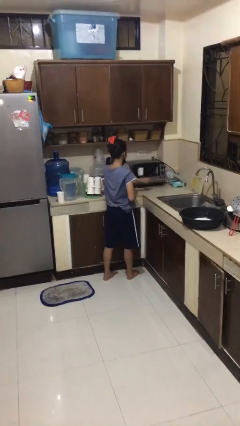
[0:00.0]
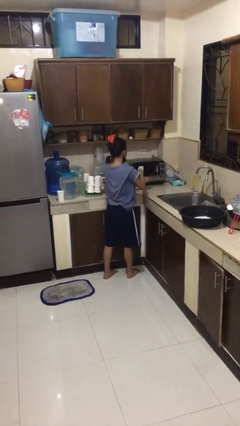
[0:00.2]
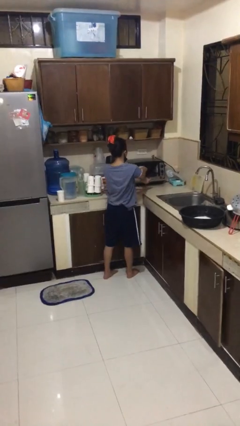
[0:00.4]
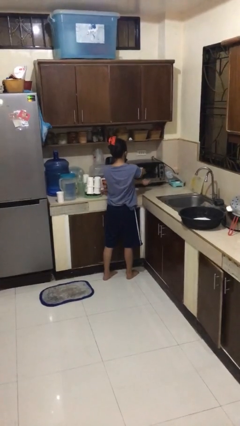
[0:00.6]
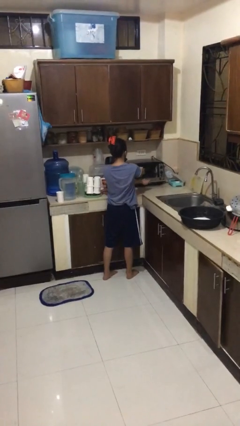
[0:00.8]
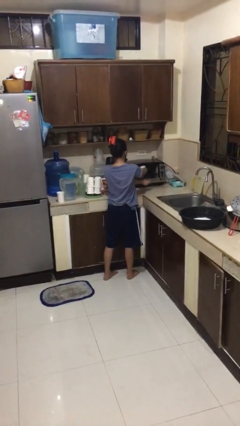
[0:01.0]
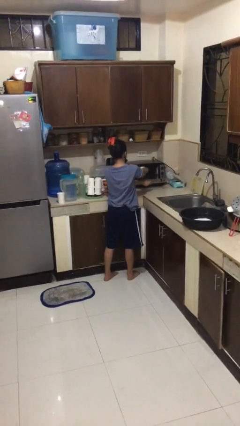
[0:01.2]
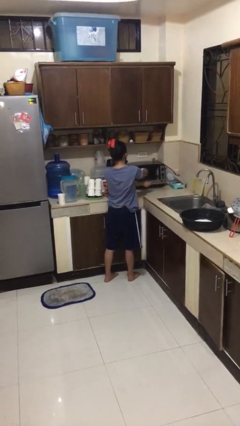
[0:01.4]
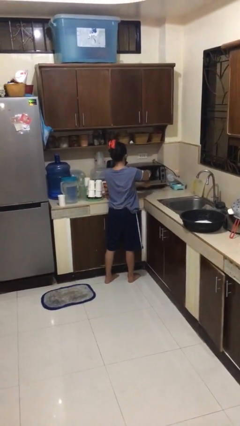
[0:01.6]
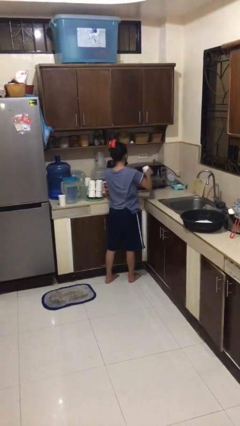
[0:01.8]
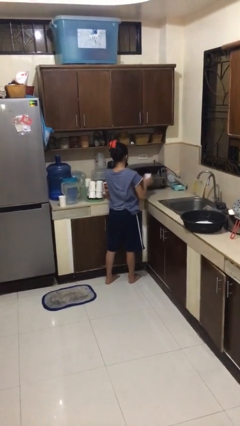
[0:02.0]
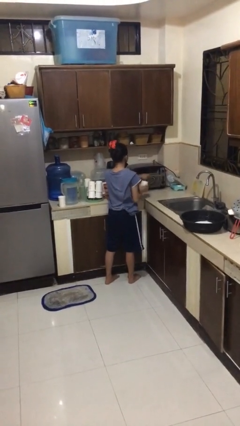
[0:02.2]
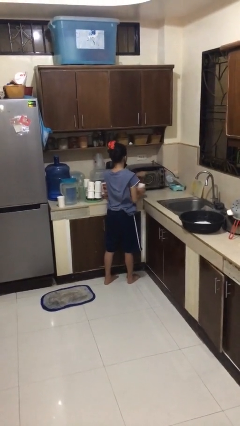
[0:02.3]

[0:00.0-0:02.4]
person takes object from microwave

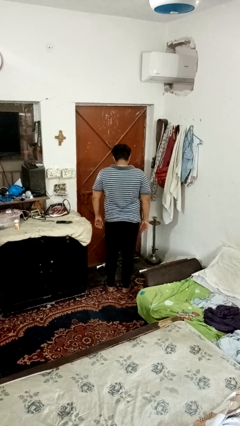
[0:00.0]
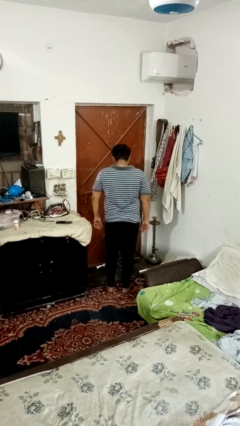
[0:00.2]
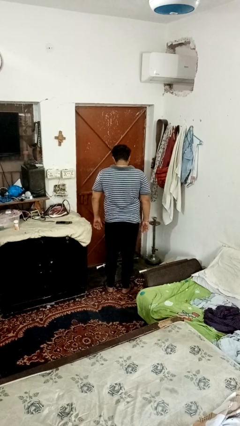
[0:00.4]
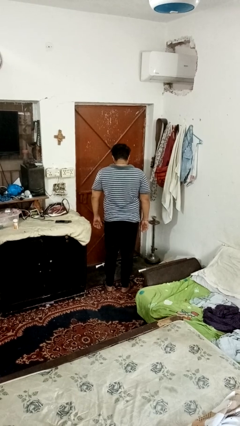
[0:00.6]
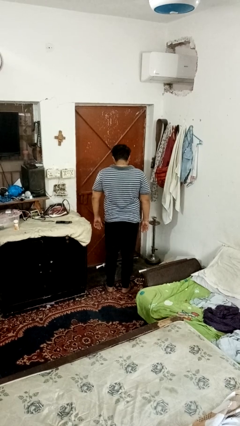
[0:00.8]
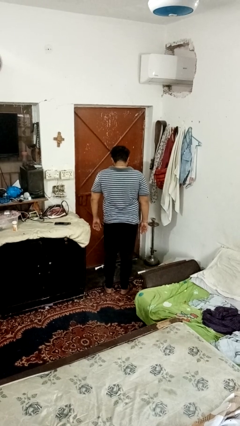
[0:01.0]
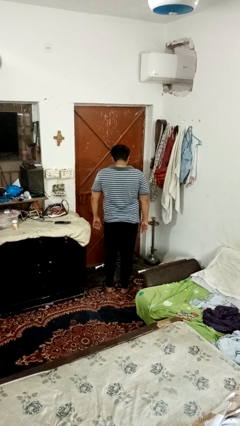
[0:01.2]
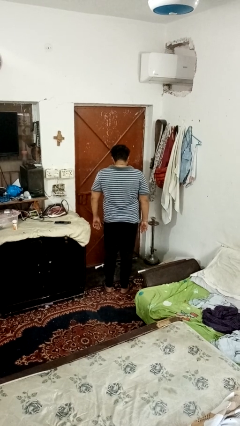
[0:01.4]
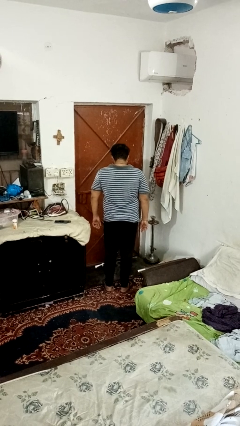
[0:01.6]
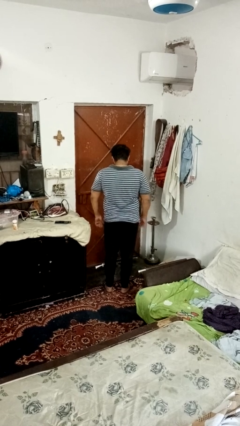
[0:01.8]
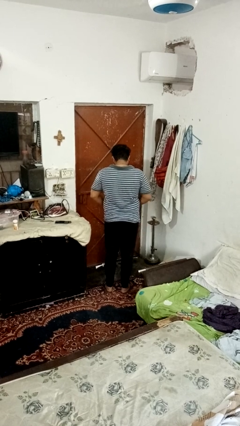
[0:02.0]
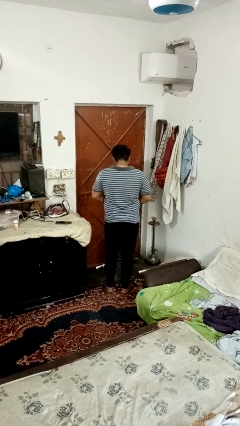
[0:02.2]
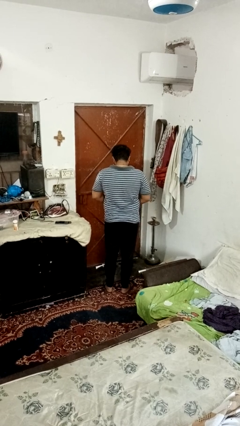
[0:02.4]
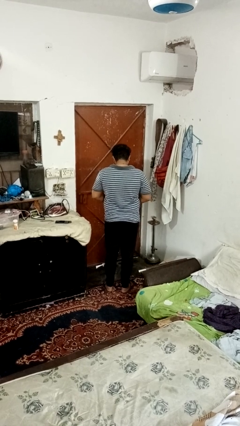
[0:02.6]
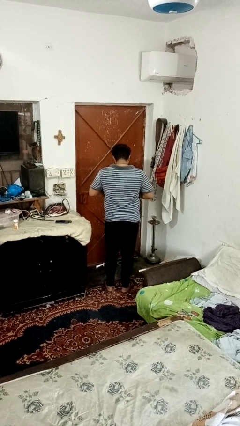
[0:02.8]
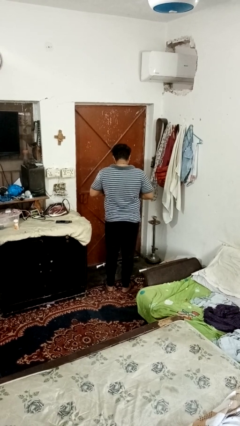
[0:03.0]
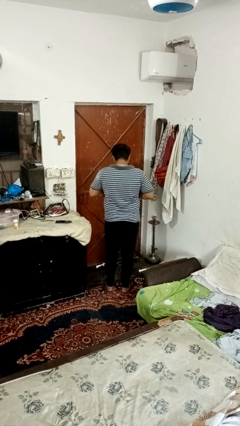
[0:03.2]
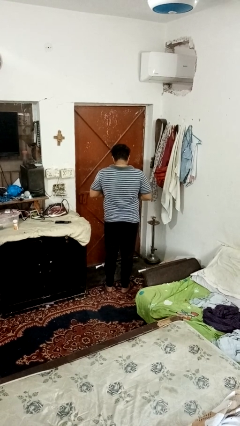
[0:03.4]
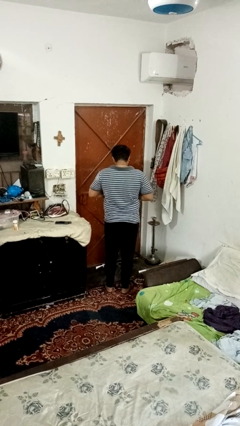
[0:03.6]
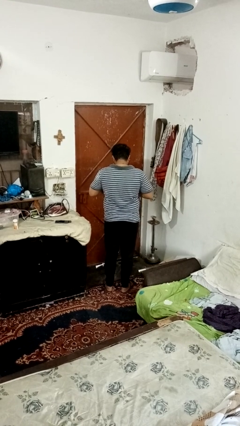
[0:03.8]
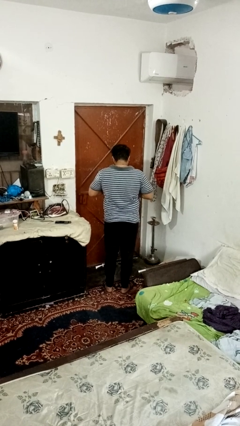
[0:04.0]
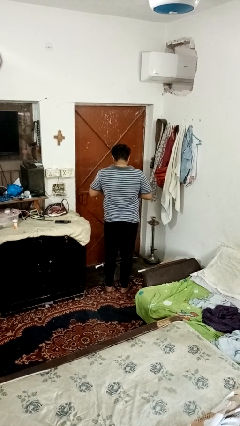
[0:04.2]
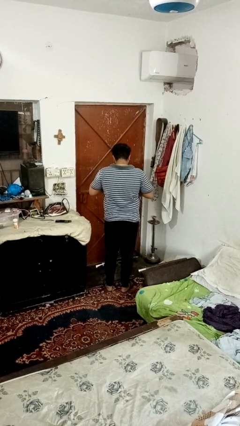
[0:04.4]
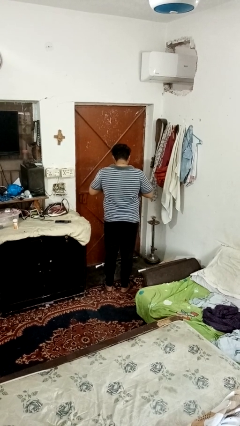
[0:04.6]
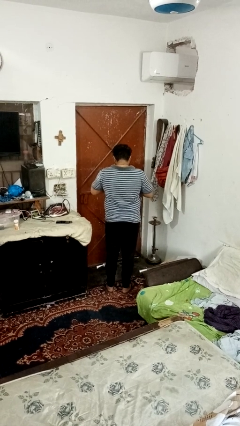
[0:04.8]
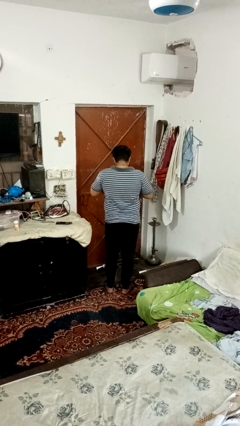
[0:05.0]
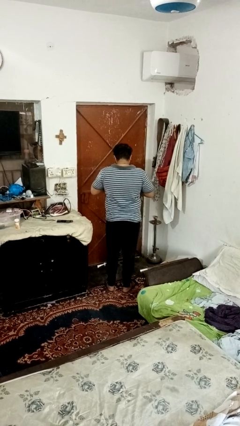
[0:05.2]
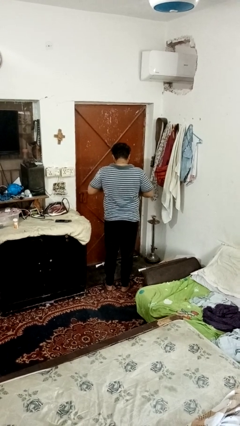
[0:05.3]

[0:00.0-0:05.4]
person buttons shirt

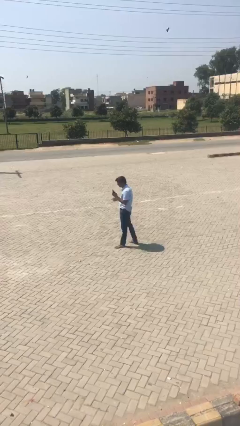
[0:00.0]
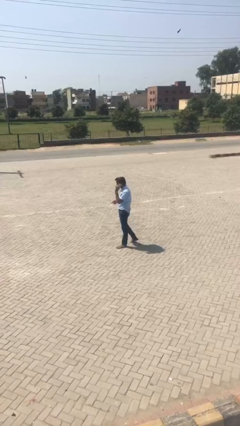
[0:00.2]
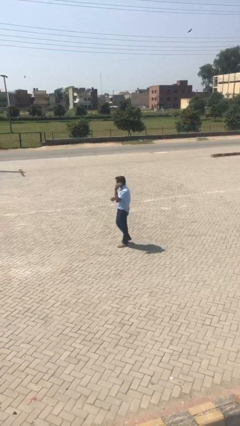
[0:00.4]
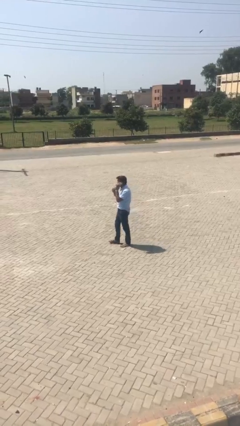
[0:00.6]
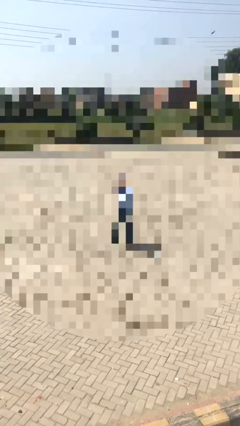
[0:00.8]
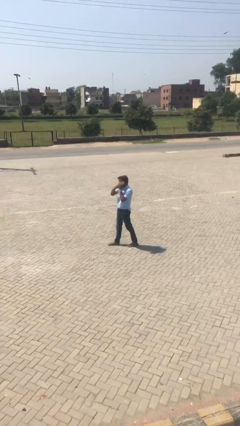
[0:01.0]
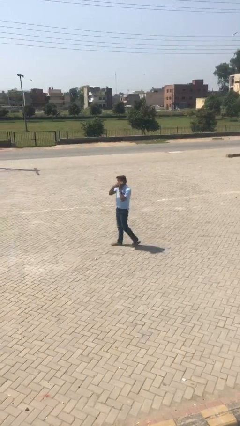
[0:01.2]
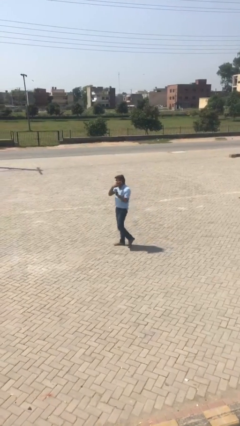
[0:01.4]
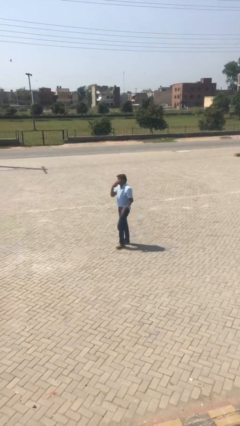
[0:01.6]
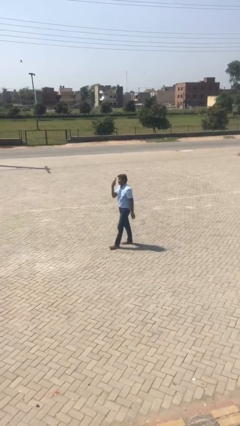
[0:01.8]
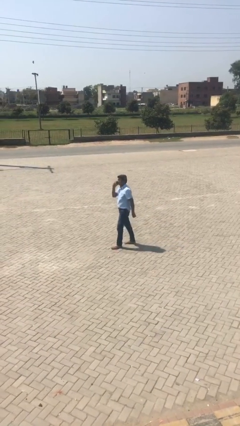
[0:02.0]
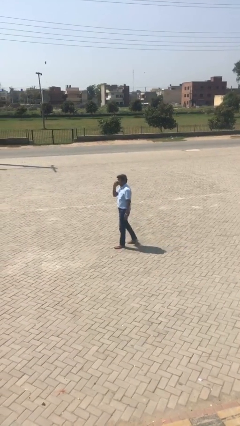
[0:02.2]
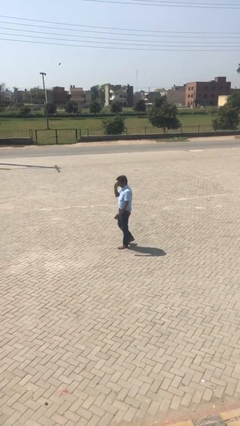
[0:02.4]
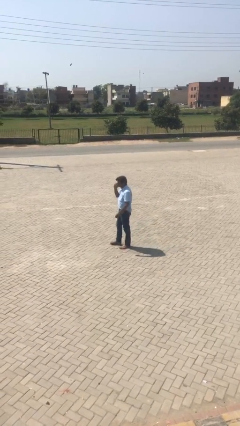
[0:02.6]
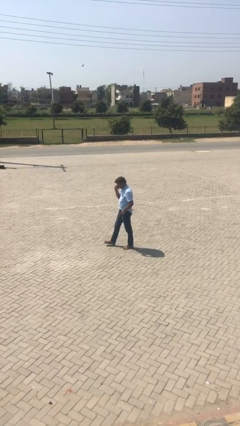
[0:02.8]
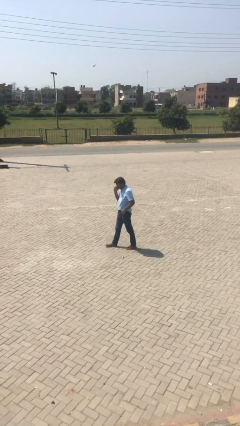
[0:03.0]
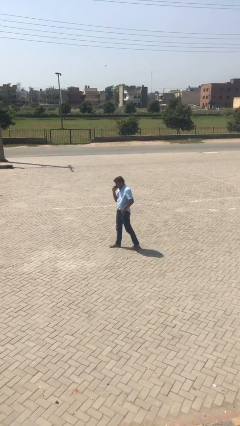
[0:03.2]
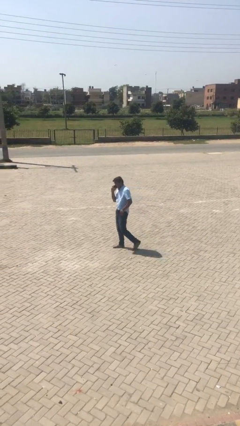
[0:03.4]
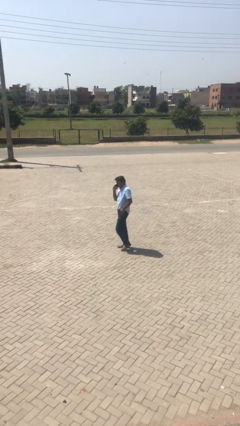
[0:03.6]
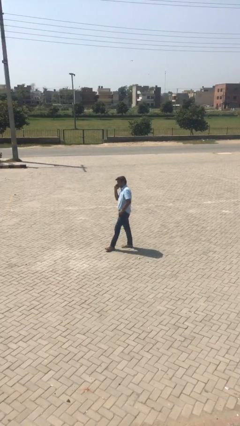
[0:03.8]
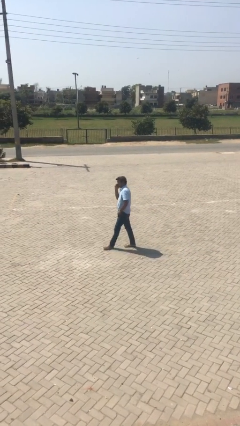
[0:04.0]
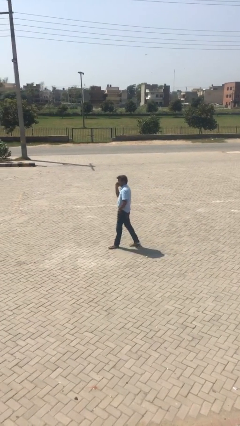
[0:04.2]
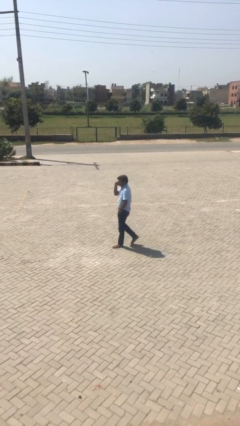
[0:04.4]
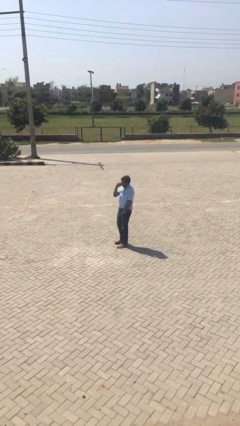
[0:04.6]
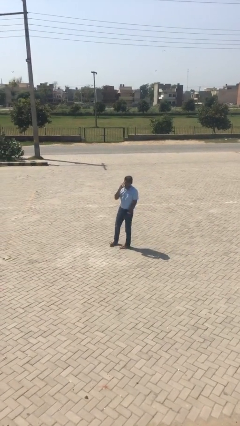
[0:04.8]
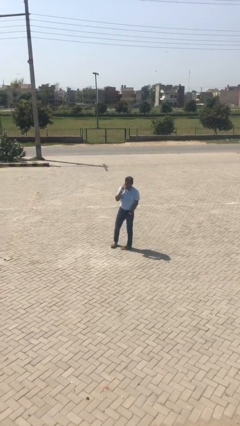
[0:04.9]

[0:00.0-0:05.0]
person talks on phone

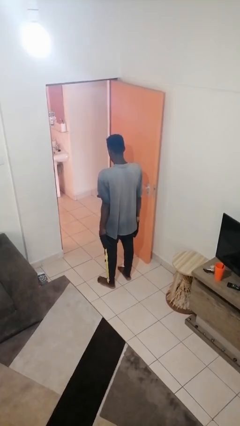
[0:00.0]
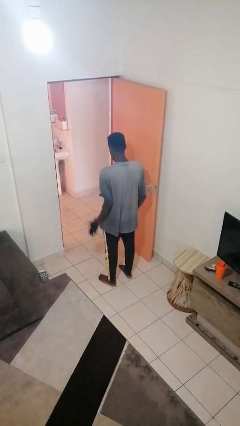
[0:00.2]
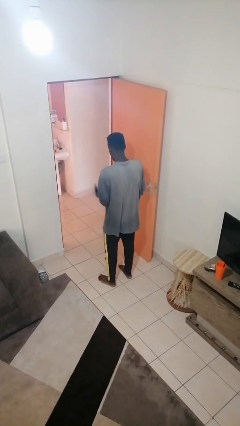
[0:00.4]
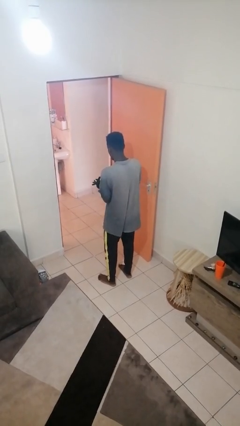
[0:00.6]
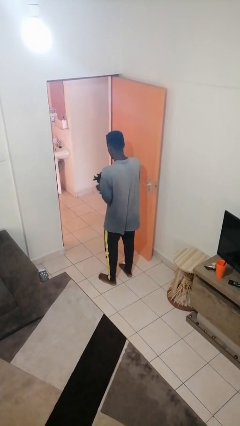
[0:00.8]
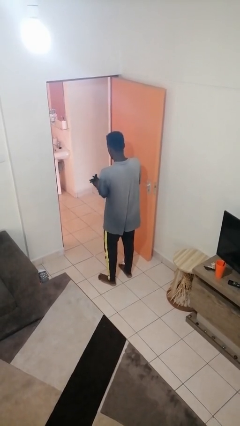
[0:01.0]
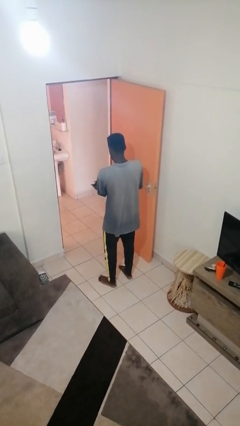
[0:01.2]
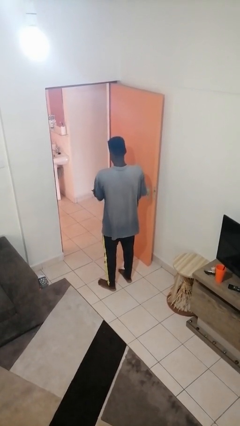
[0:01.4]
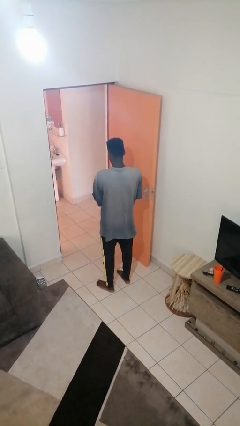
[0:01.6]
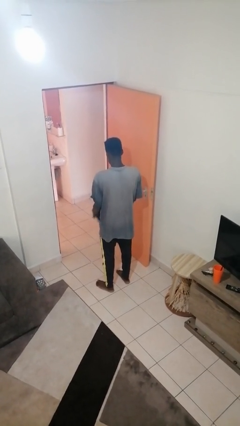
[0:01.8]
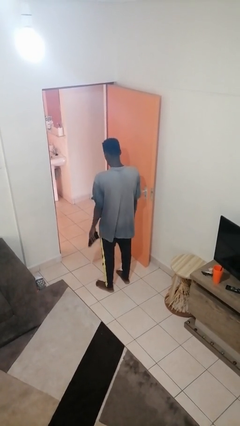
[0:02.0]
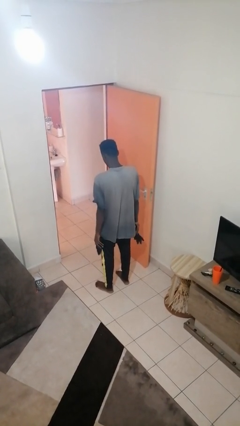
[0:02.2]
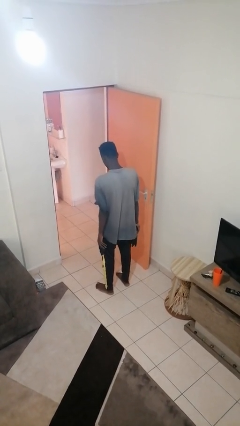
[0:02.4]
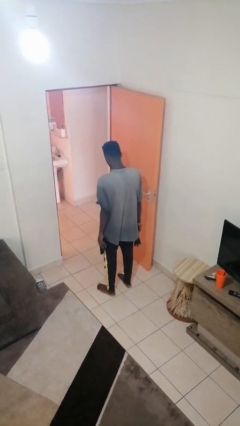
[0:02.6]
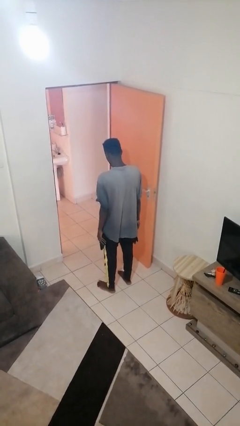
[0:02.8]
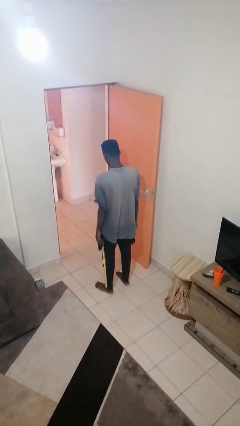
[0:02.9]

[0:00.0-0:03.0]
person takes off gloves

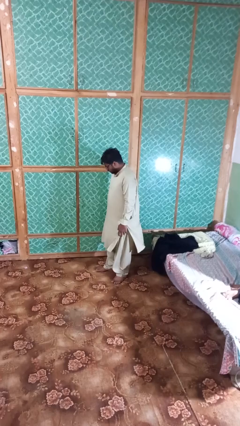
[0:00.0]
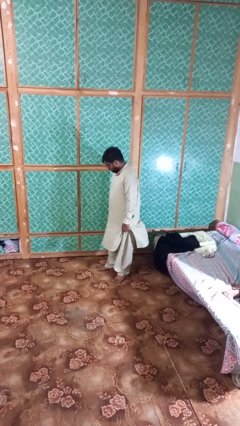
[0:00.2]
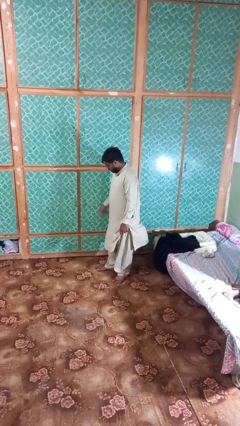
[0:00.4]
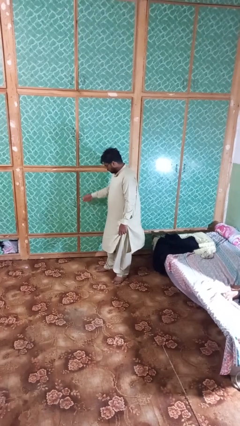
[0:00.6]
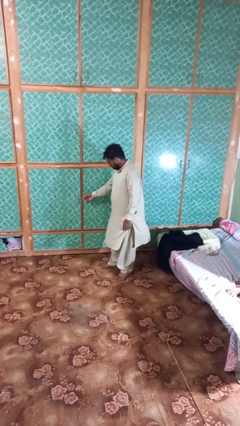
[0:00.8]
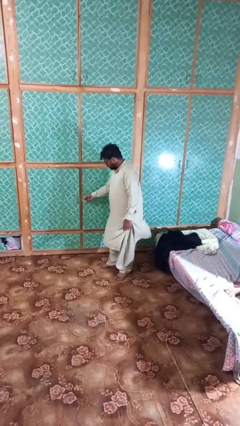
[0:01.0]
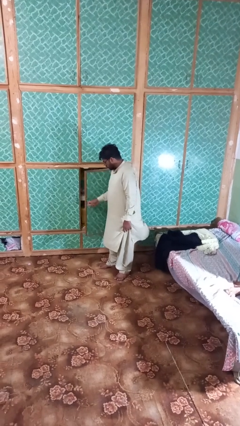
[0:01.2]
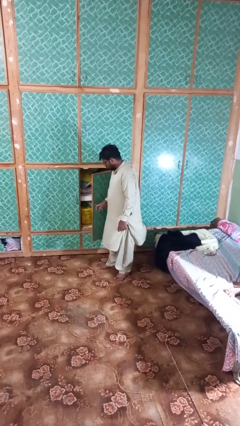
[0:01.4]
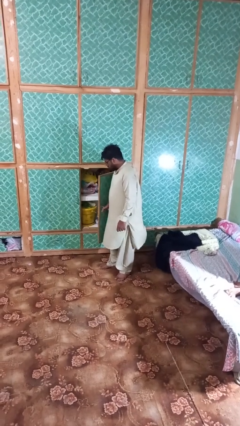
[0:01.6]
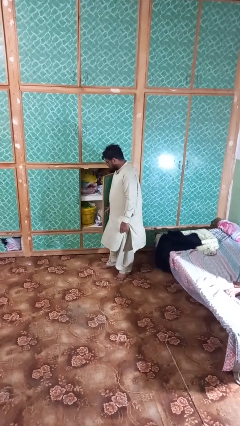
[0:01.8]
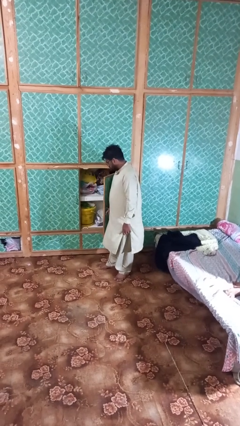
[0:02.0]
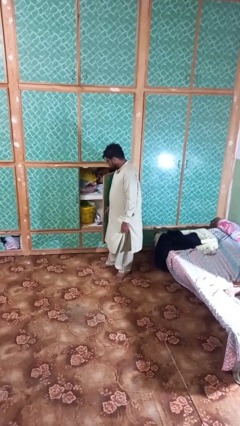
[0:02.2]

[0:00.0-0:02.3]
person opens closet door
